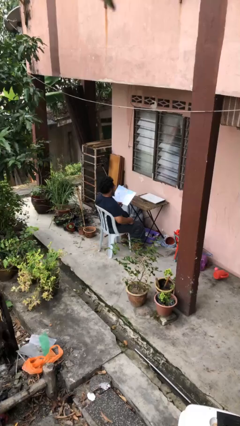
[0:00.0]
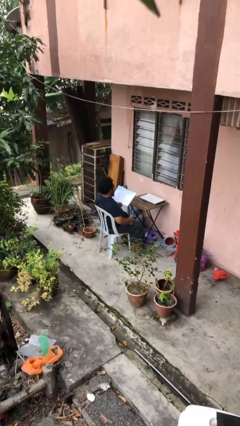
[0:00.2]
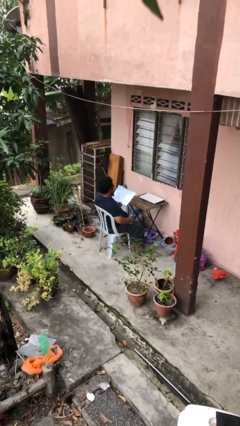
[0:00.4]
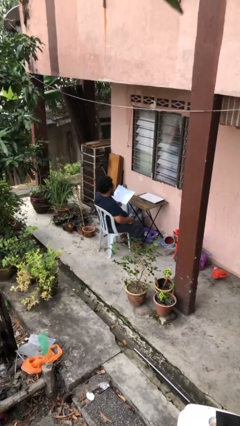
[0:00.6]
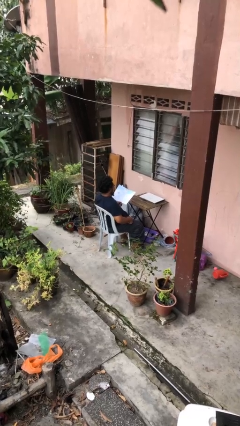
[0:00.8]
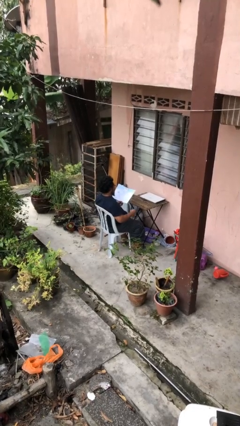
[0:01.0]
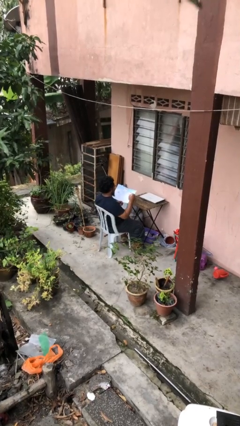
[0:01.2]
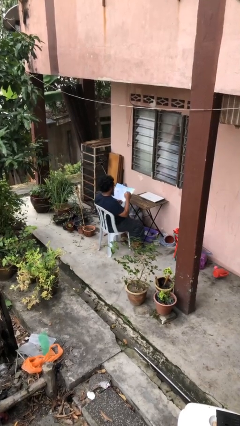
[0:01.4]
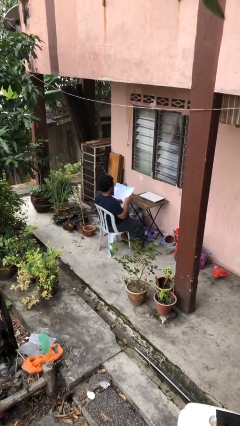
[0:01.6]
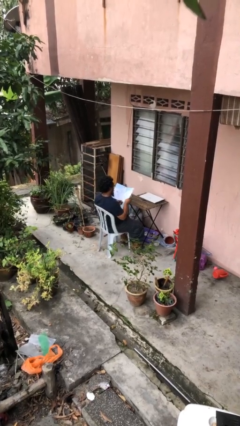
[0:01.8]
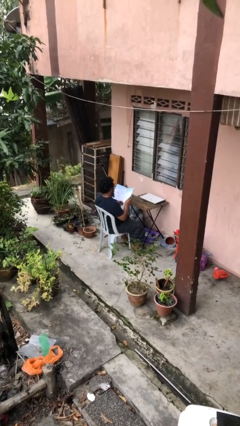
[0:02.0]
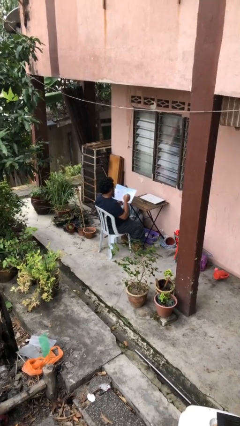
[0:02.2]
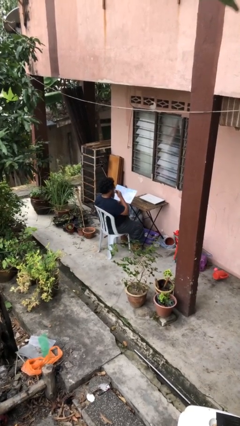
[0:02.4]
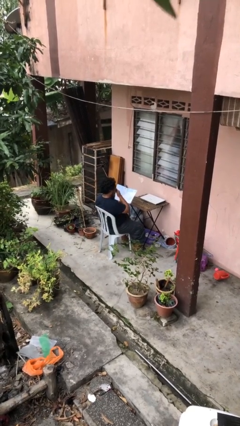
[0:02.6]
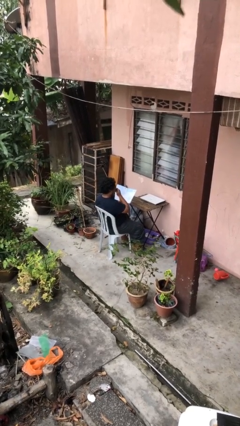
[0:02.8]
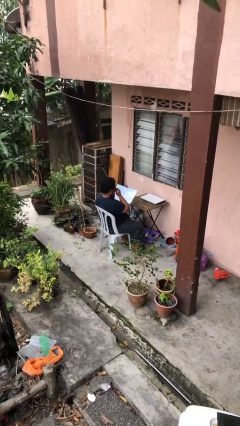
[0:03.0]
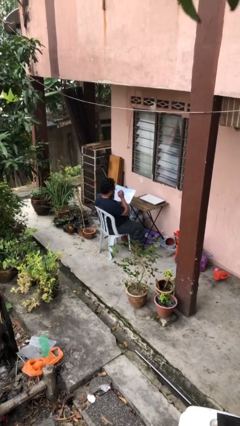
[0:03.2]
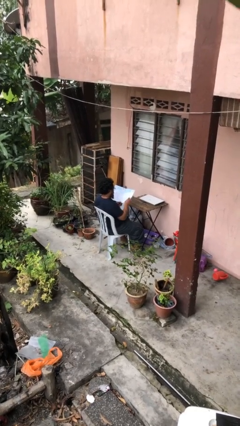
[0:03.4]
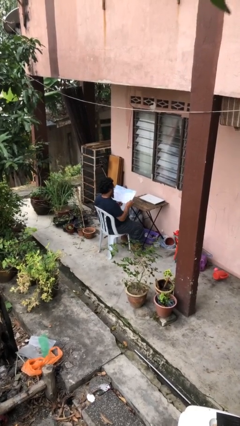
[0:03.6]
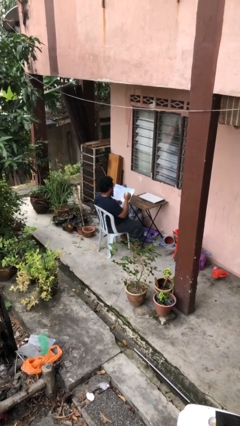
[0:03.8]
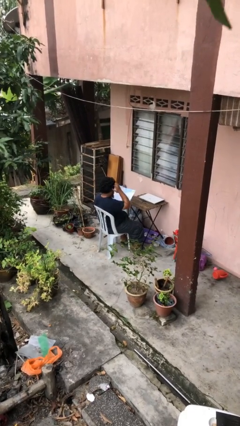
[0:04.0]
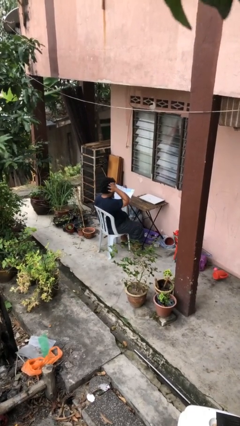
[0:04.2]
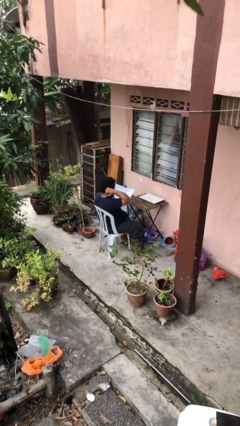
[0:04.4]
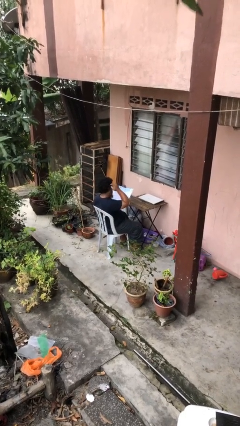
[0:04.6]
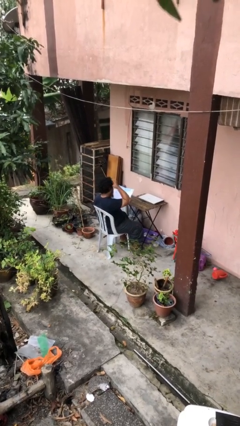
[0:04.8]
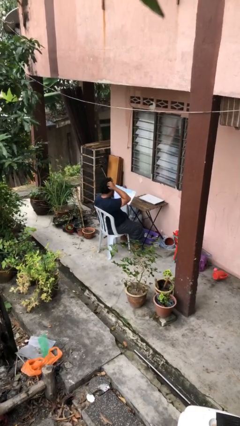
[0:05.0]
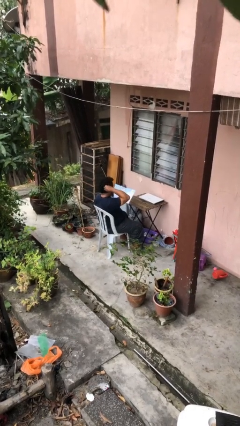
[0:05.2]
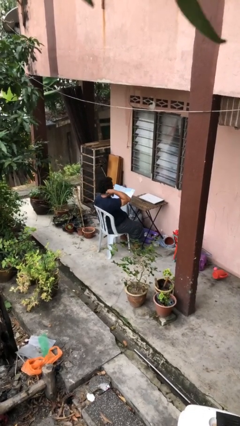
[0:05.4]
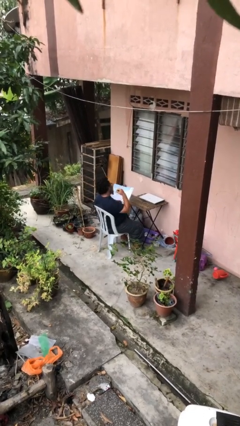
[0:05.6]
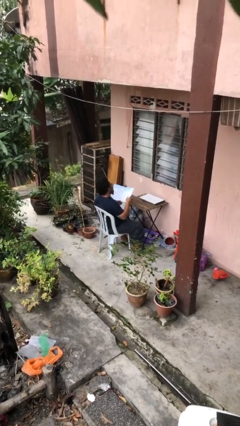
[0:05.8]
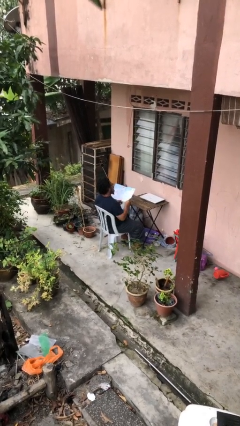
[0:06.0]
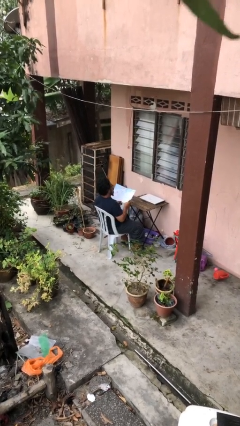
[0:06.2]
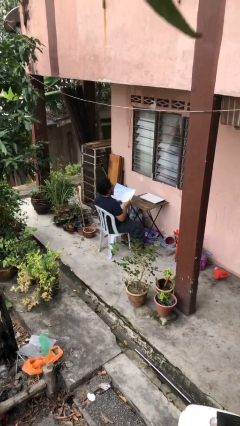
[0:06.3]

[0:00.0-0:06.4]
person reads document

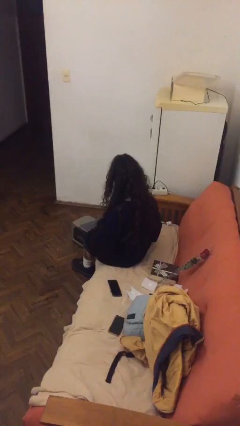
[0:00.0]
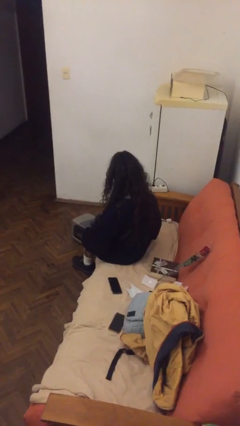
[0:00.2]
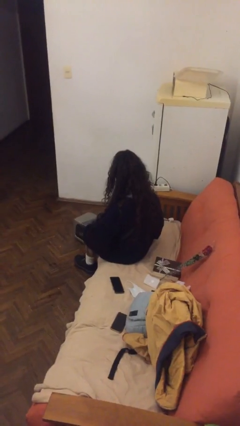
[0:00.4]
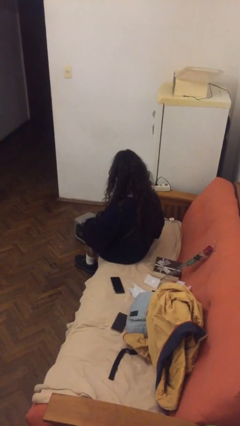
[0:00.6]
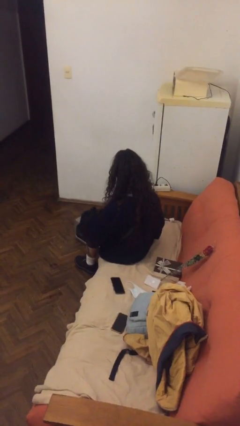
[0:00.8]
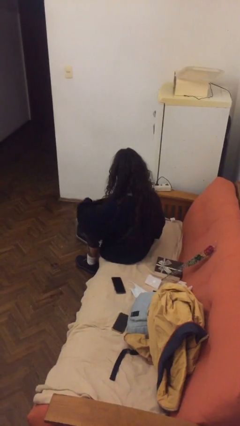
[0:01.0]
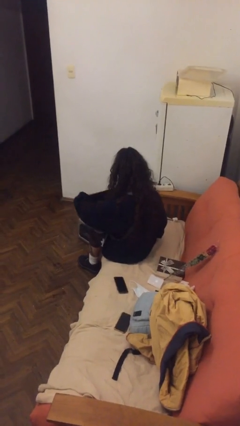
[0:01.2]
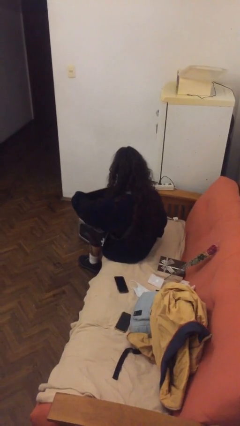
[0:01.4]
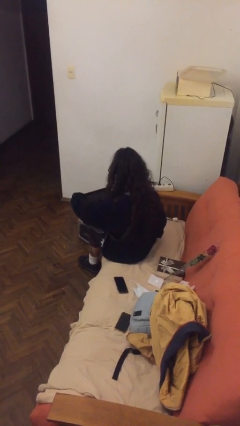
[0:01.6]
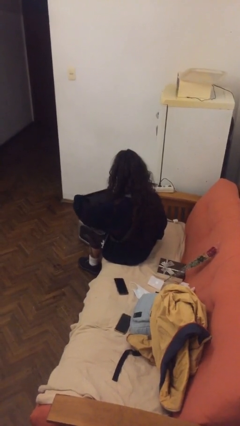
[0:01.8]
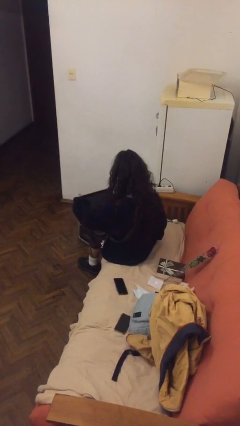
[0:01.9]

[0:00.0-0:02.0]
person opens laptop

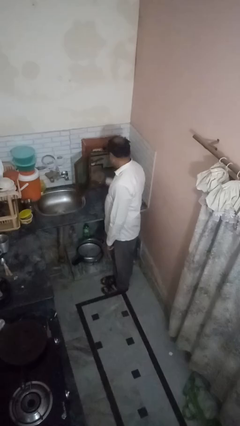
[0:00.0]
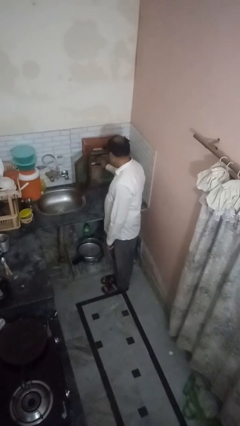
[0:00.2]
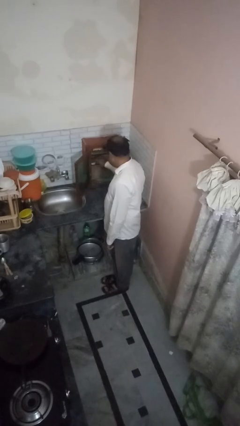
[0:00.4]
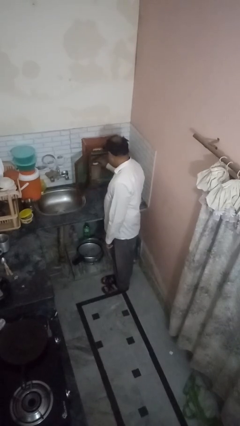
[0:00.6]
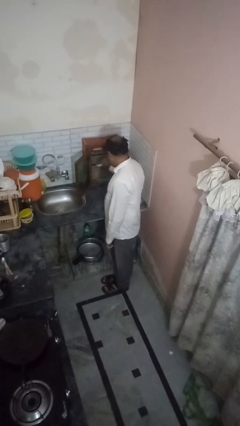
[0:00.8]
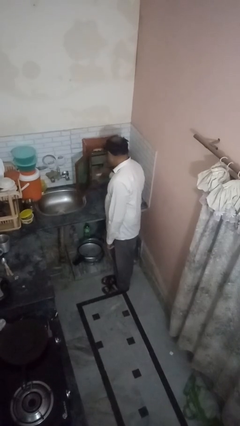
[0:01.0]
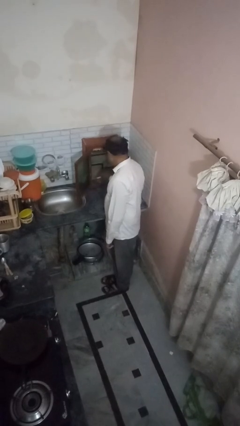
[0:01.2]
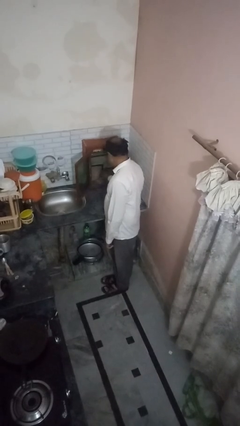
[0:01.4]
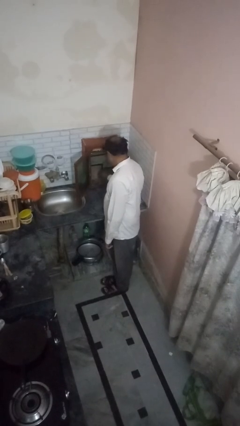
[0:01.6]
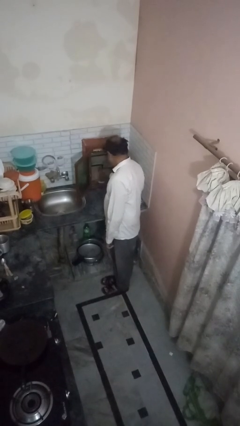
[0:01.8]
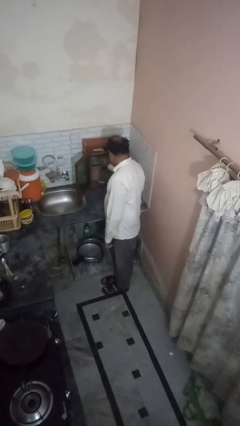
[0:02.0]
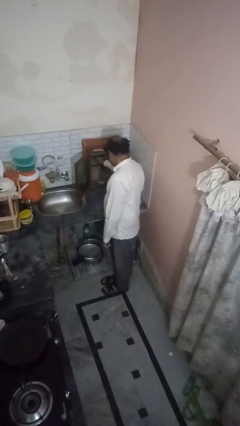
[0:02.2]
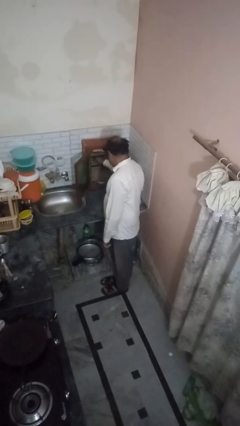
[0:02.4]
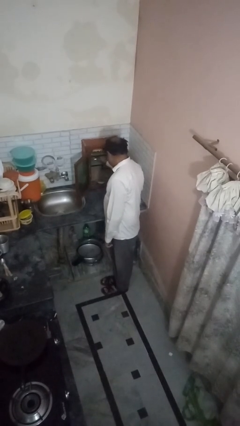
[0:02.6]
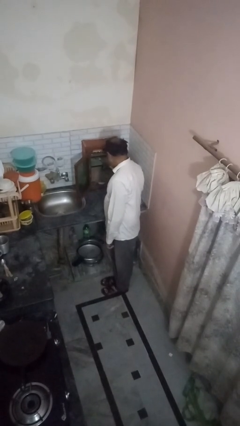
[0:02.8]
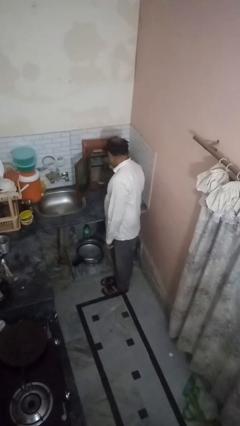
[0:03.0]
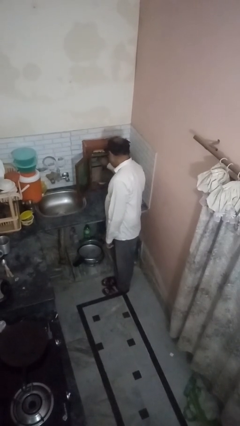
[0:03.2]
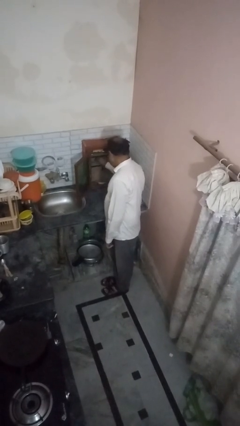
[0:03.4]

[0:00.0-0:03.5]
person searches in kitchen drawer

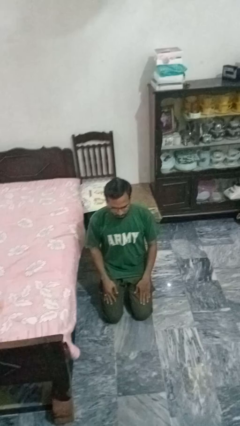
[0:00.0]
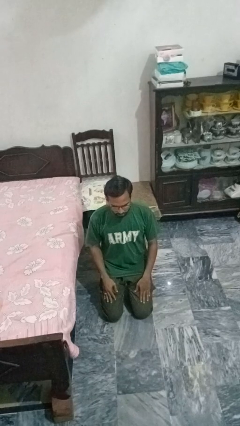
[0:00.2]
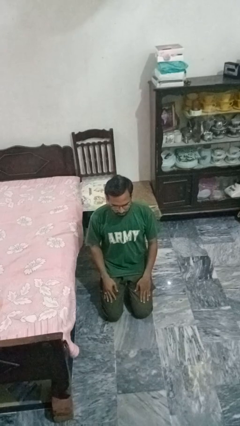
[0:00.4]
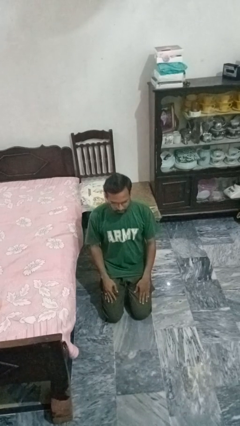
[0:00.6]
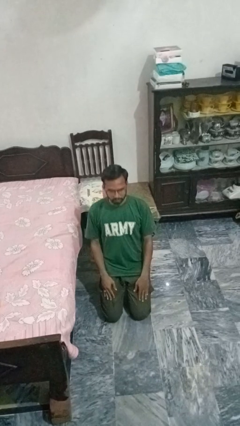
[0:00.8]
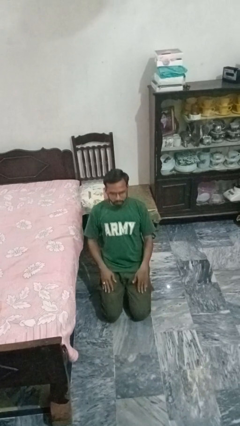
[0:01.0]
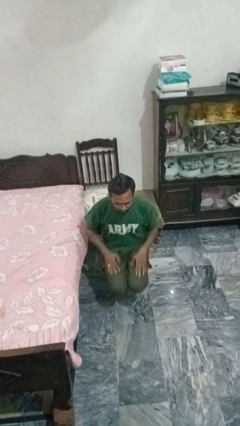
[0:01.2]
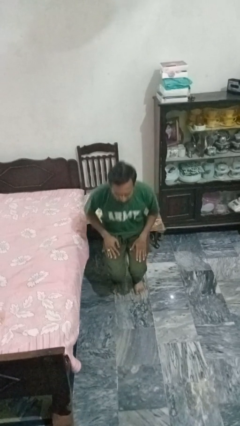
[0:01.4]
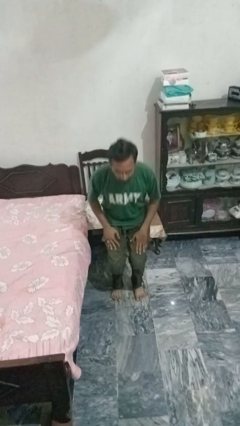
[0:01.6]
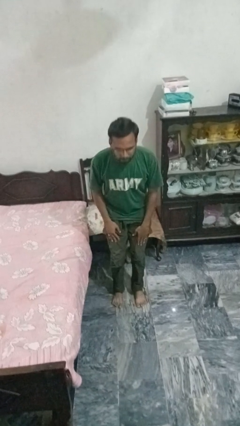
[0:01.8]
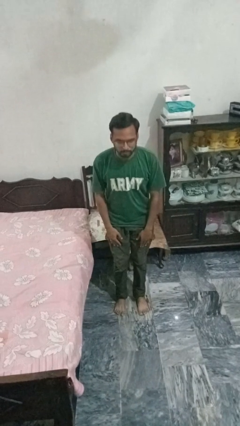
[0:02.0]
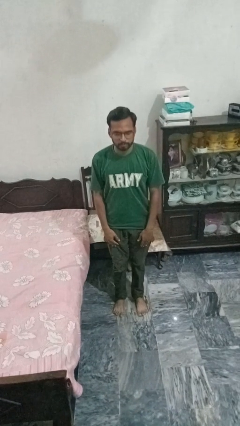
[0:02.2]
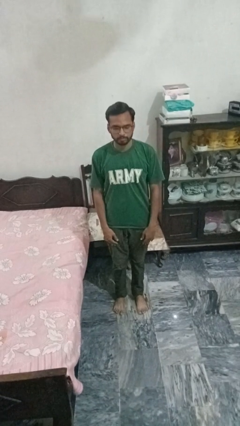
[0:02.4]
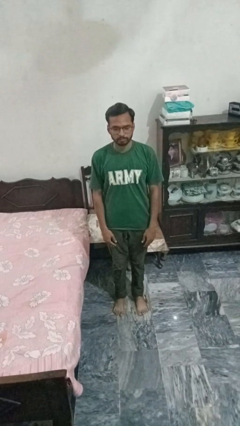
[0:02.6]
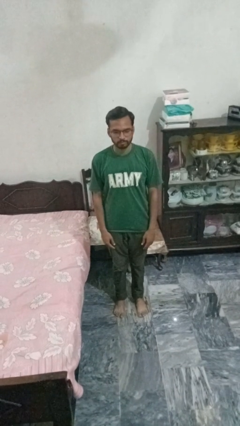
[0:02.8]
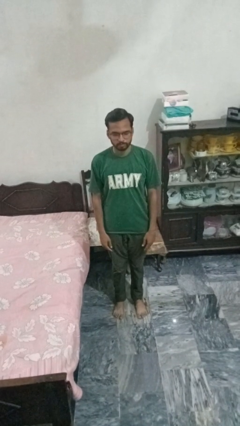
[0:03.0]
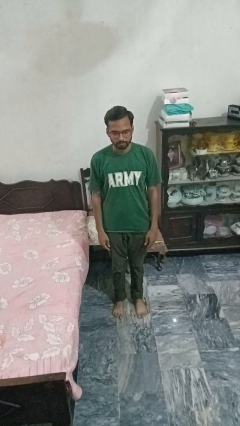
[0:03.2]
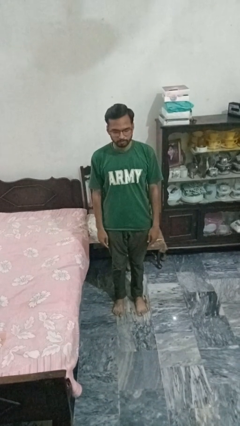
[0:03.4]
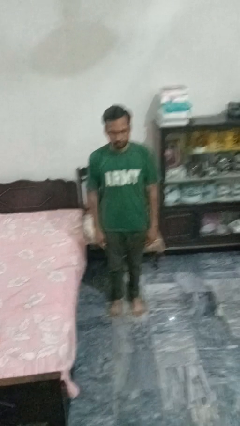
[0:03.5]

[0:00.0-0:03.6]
person stands up from floor

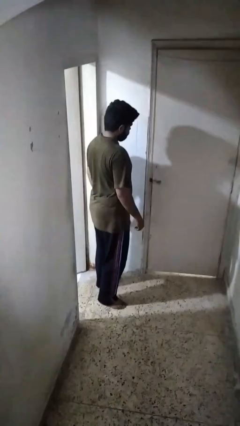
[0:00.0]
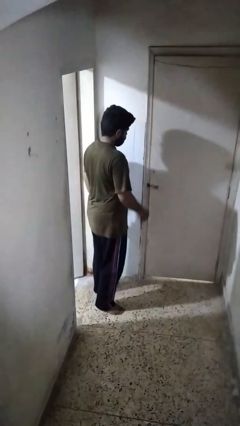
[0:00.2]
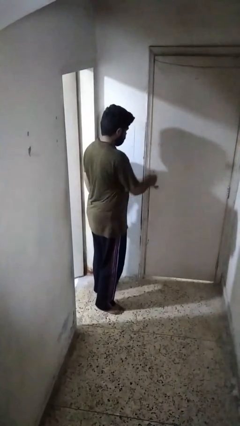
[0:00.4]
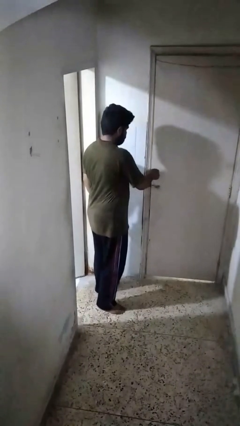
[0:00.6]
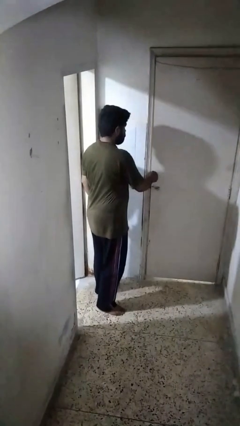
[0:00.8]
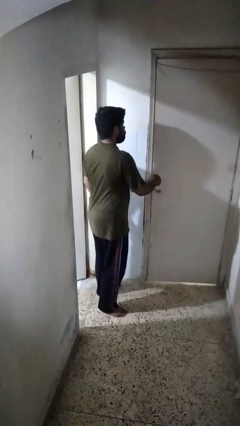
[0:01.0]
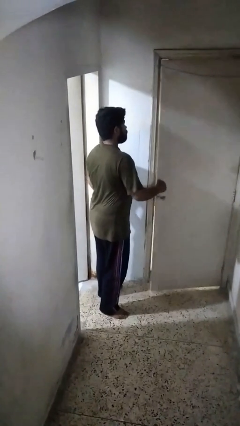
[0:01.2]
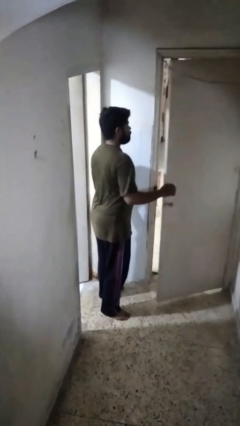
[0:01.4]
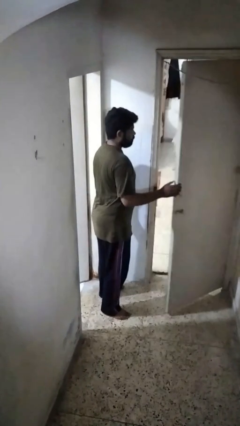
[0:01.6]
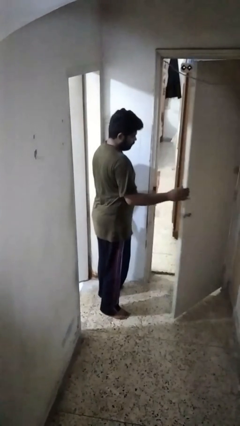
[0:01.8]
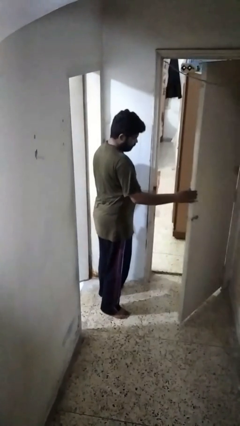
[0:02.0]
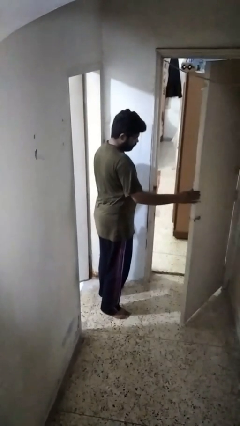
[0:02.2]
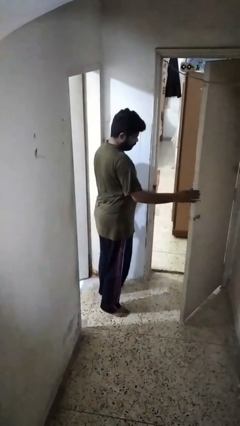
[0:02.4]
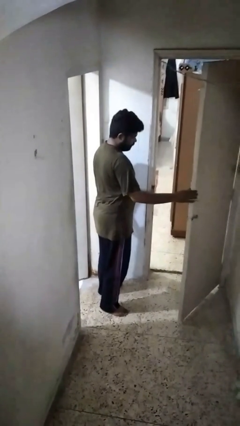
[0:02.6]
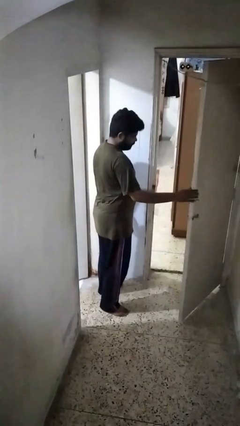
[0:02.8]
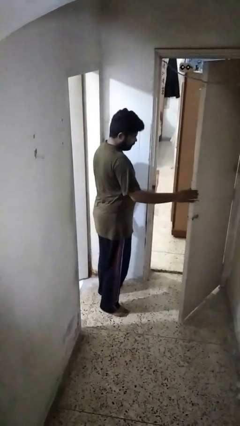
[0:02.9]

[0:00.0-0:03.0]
person opens facility door
